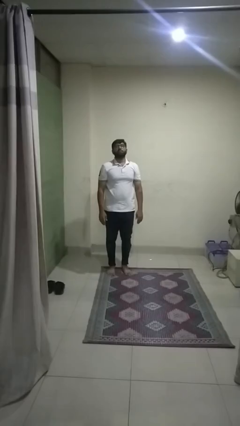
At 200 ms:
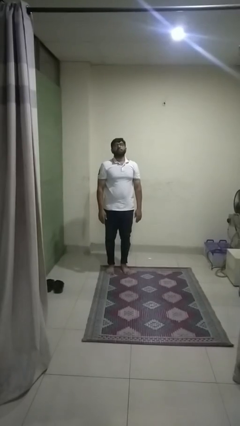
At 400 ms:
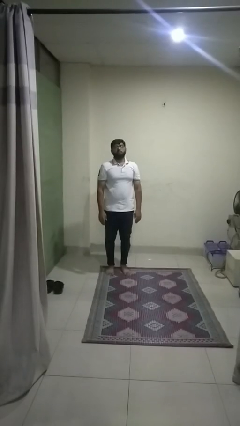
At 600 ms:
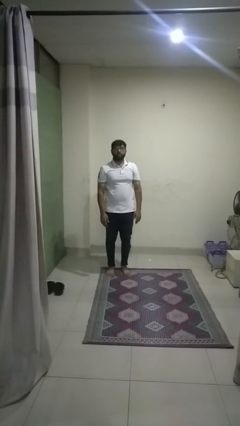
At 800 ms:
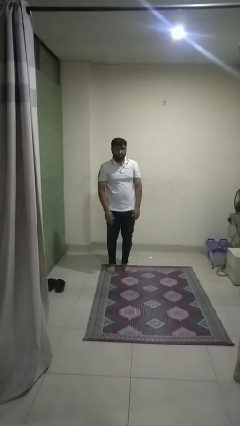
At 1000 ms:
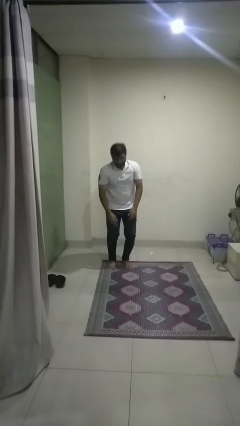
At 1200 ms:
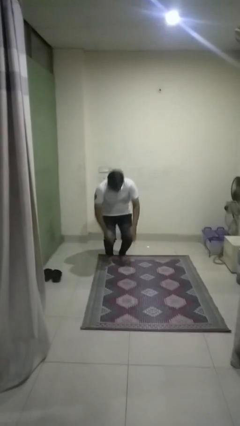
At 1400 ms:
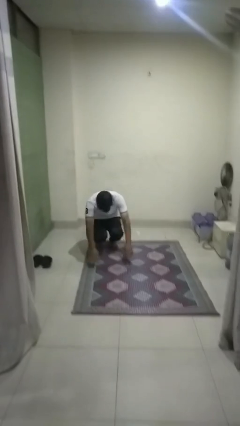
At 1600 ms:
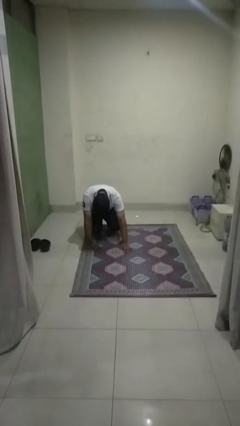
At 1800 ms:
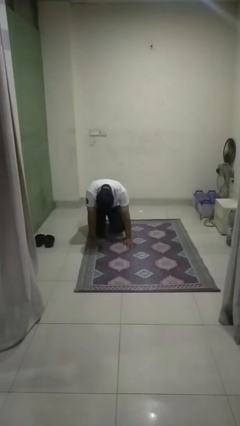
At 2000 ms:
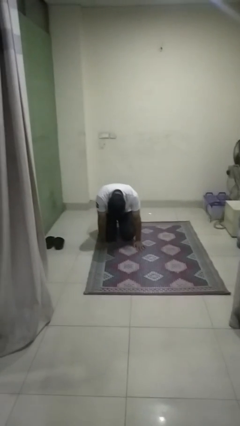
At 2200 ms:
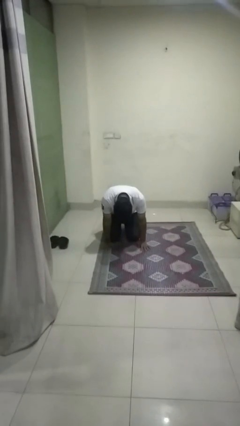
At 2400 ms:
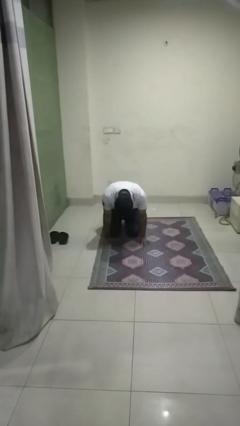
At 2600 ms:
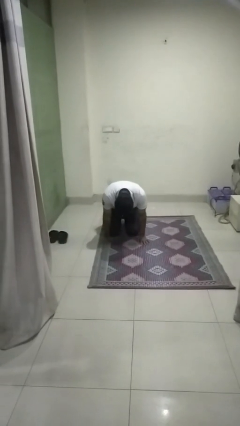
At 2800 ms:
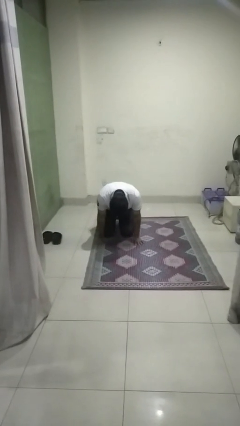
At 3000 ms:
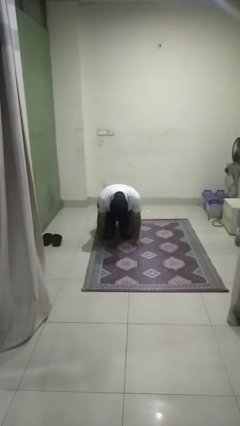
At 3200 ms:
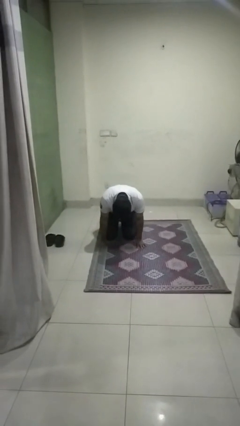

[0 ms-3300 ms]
person falls while standing

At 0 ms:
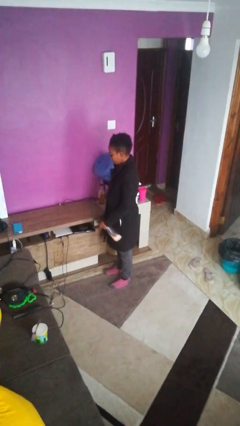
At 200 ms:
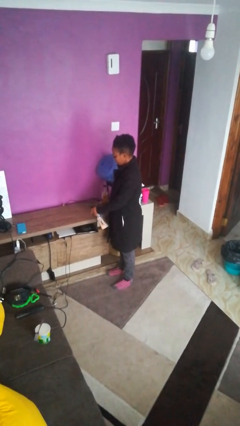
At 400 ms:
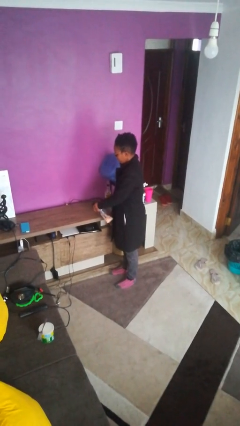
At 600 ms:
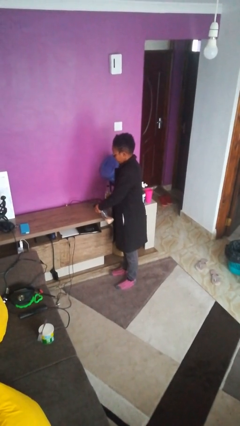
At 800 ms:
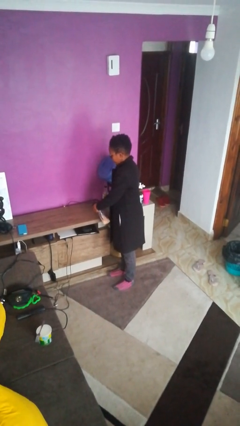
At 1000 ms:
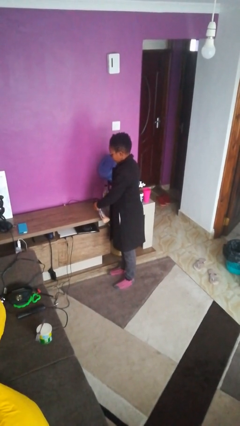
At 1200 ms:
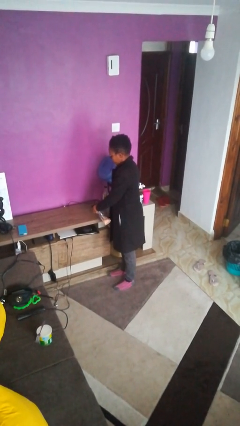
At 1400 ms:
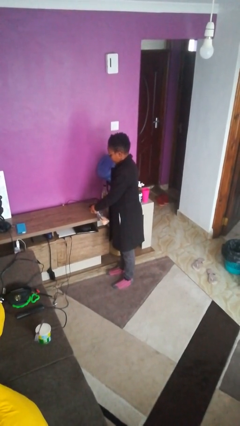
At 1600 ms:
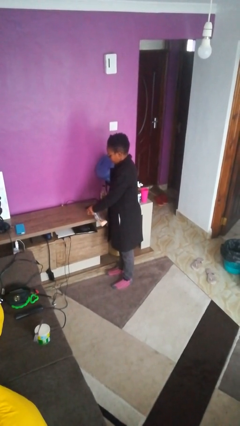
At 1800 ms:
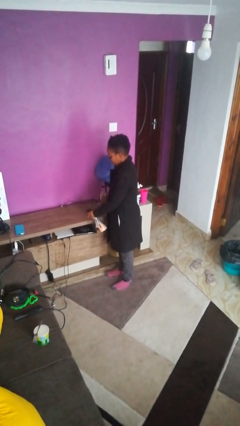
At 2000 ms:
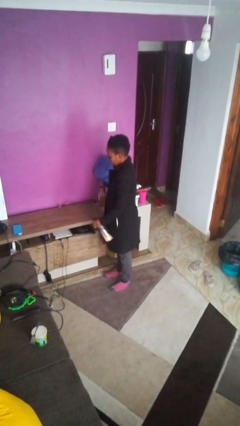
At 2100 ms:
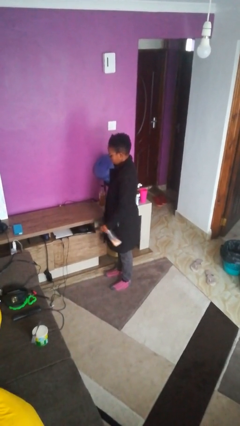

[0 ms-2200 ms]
person sprays from bottle

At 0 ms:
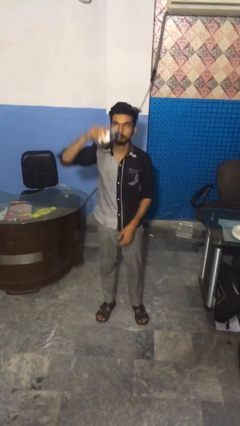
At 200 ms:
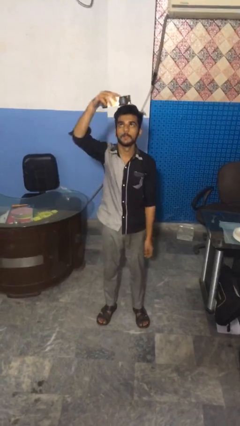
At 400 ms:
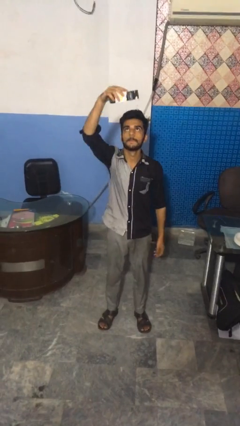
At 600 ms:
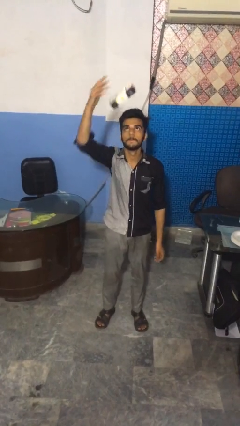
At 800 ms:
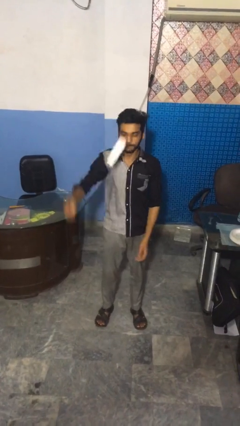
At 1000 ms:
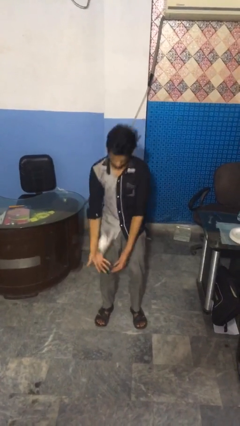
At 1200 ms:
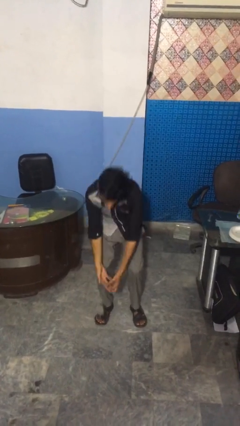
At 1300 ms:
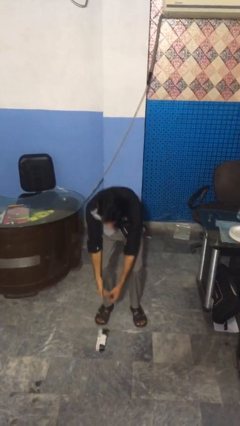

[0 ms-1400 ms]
person drops object

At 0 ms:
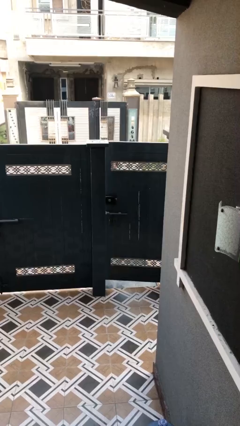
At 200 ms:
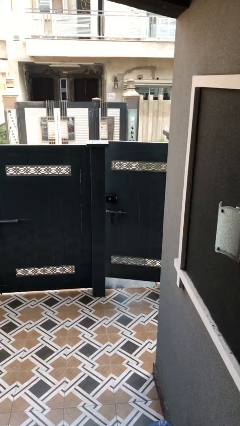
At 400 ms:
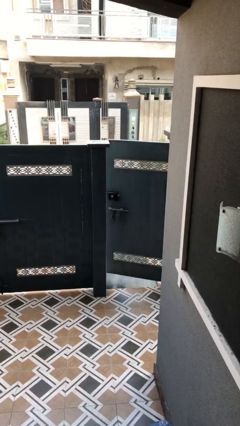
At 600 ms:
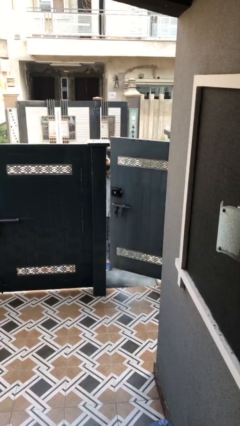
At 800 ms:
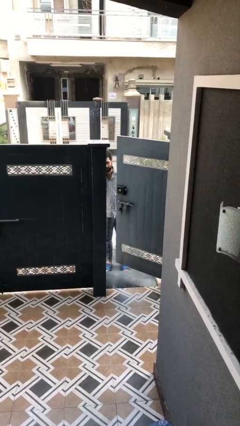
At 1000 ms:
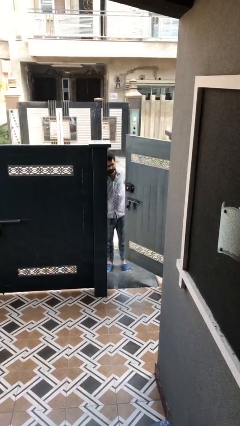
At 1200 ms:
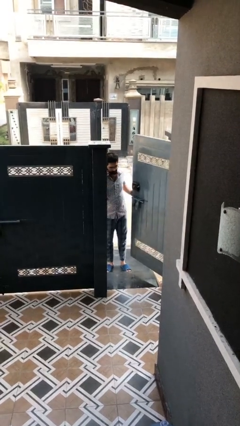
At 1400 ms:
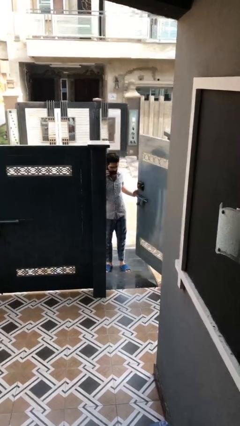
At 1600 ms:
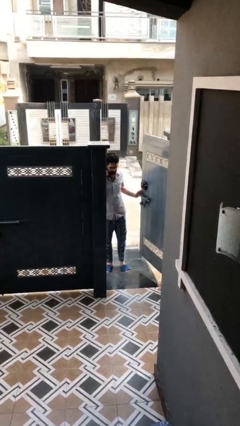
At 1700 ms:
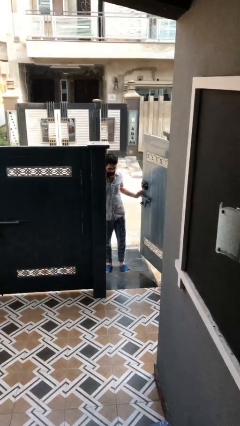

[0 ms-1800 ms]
person opens facility door

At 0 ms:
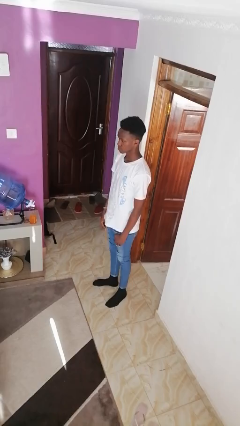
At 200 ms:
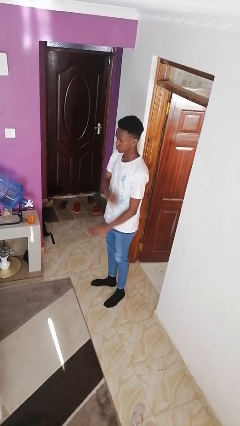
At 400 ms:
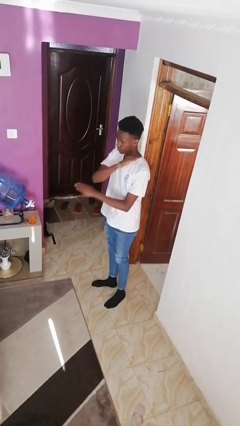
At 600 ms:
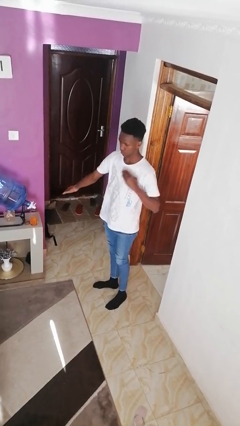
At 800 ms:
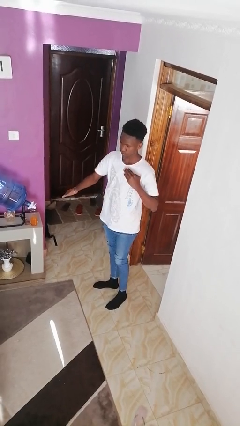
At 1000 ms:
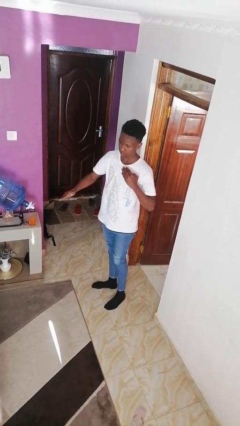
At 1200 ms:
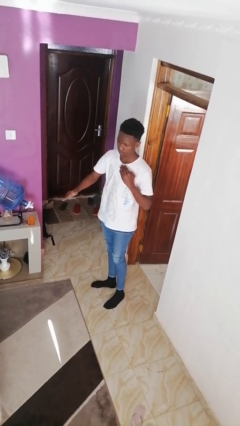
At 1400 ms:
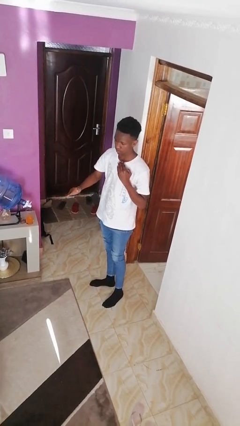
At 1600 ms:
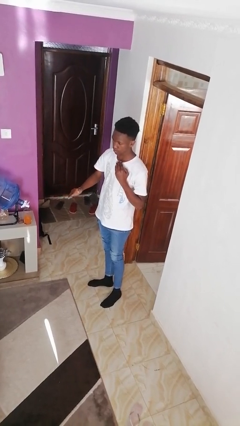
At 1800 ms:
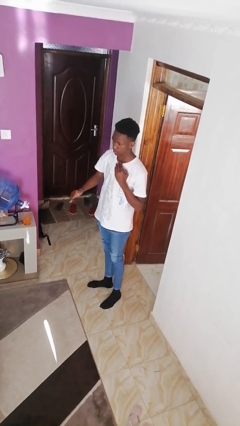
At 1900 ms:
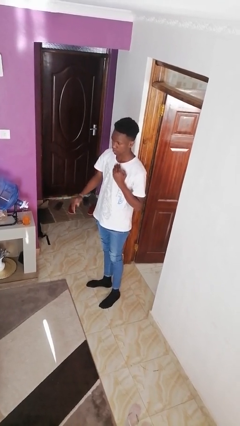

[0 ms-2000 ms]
person karate chop

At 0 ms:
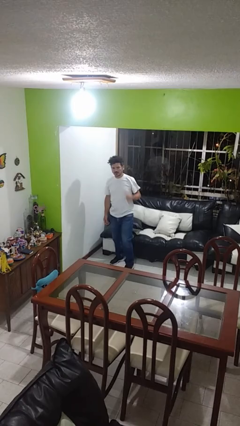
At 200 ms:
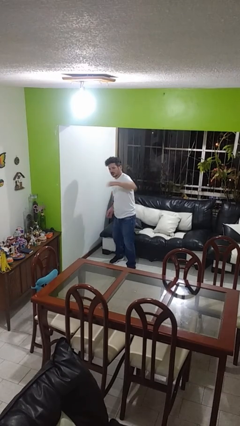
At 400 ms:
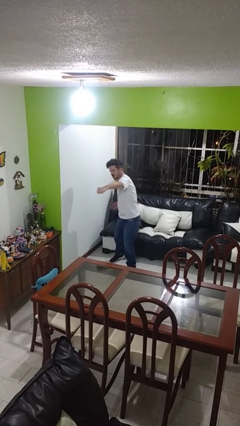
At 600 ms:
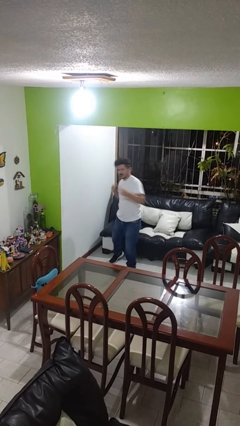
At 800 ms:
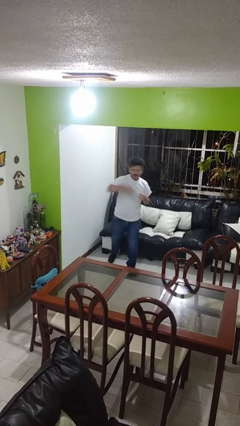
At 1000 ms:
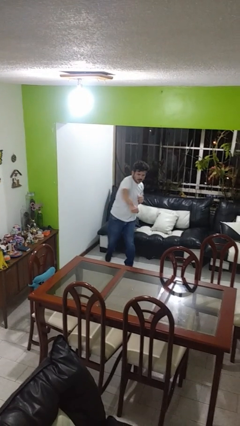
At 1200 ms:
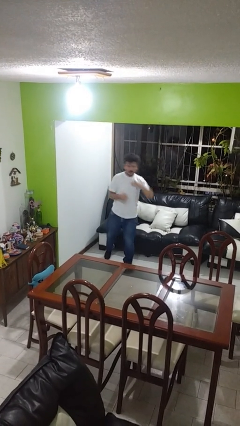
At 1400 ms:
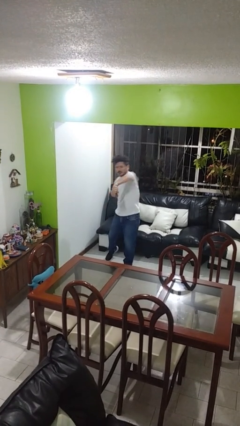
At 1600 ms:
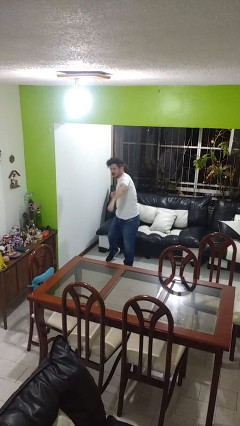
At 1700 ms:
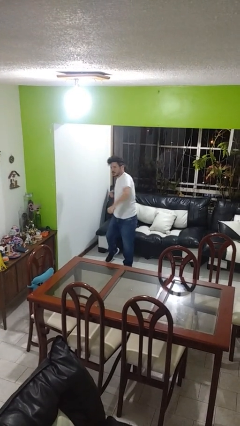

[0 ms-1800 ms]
person punches

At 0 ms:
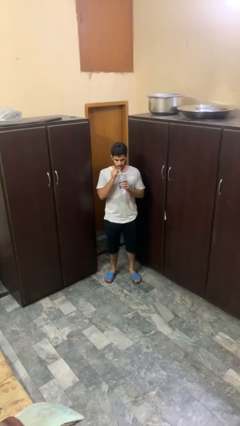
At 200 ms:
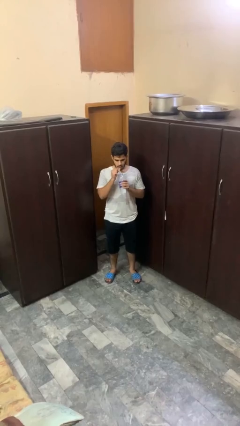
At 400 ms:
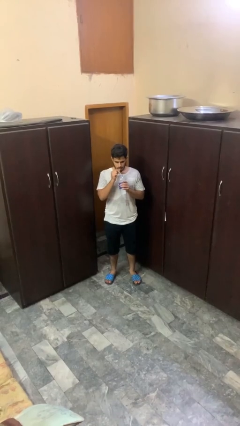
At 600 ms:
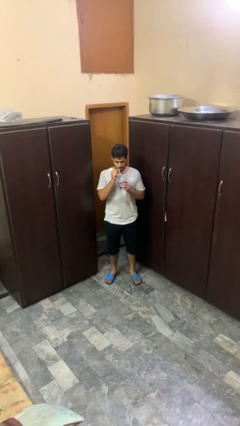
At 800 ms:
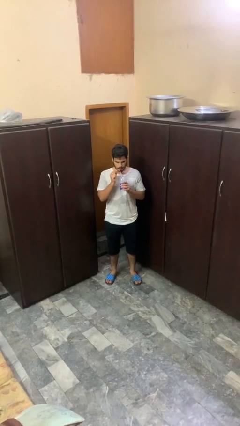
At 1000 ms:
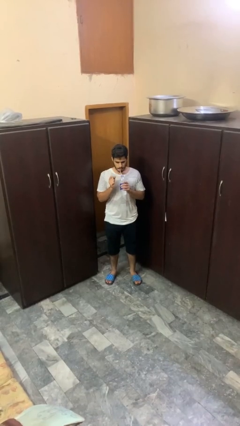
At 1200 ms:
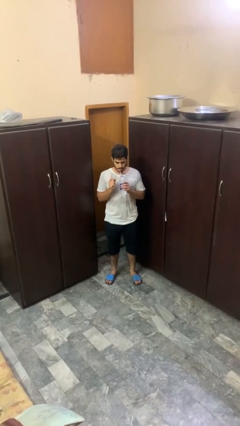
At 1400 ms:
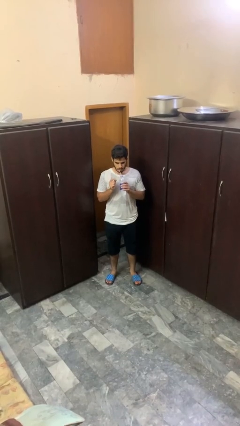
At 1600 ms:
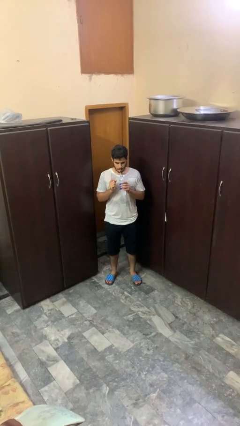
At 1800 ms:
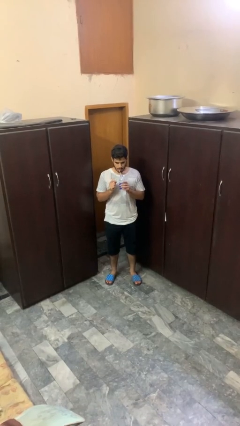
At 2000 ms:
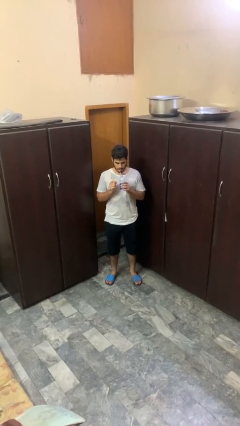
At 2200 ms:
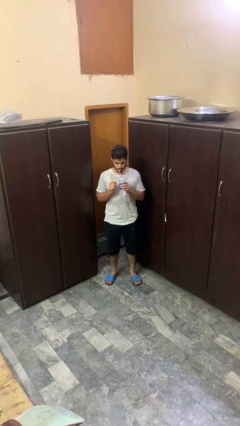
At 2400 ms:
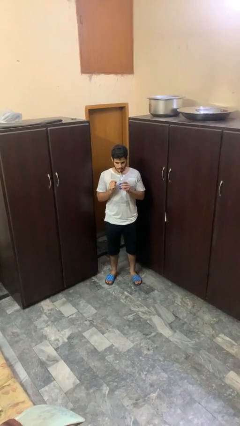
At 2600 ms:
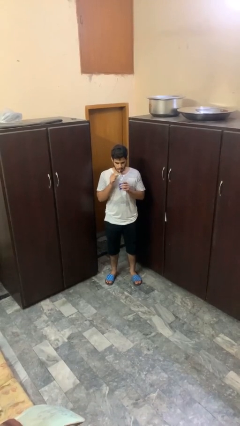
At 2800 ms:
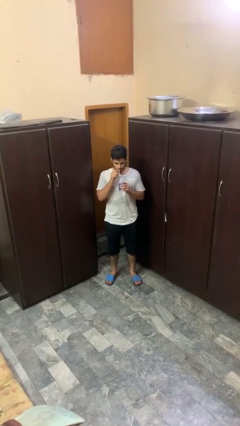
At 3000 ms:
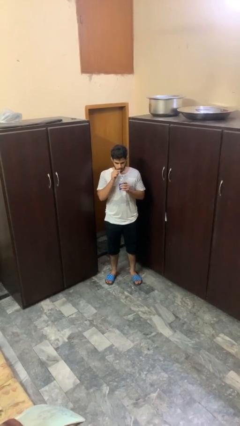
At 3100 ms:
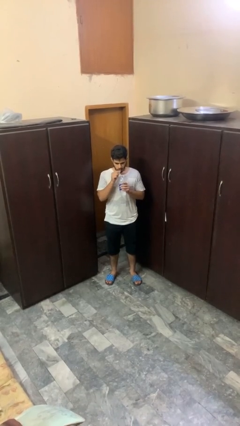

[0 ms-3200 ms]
person drinks from straw

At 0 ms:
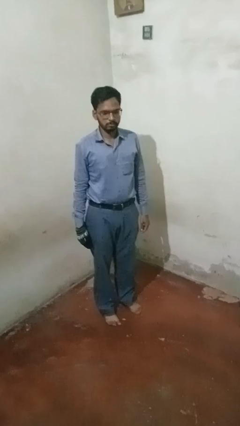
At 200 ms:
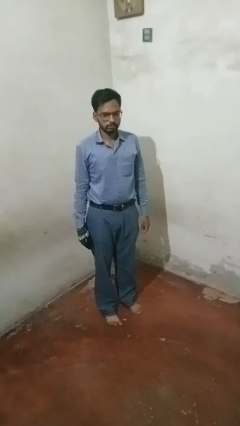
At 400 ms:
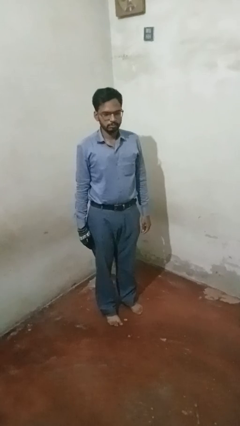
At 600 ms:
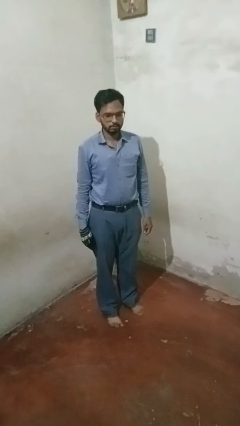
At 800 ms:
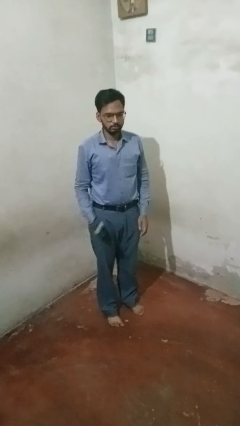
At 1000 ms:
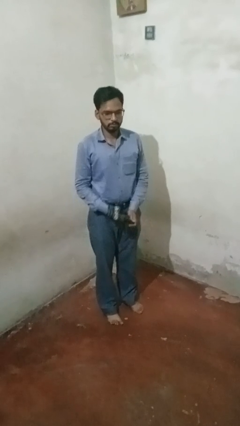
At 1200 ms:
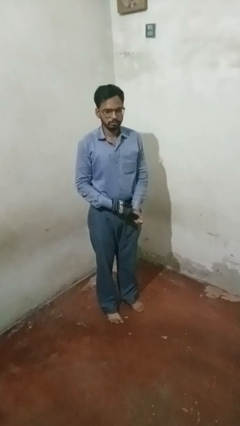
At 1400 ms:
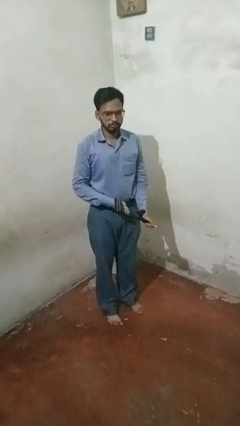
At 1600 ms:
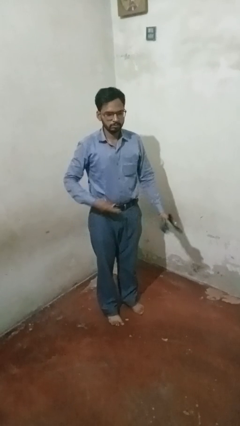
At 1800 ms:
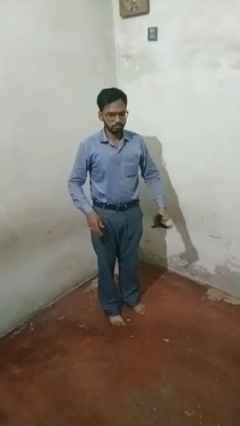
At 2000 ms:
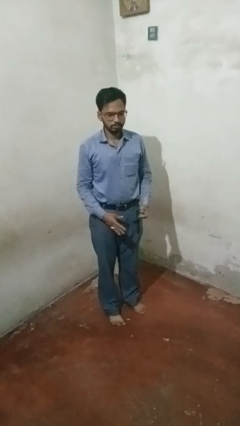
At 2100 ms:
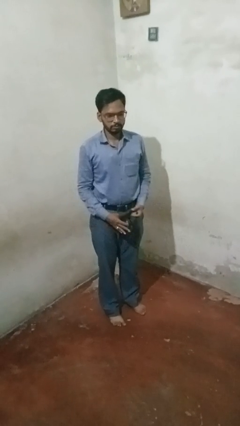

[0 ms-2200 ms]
person takes off gloves
